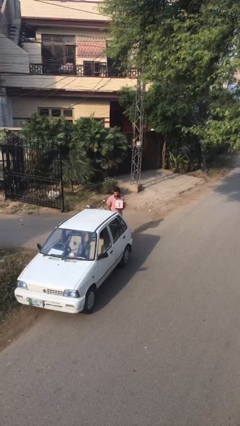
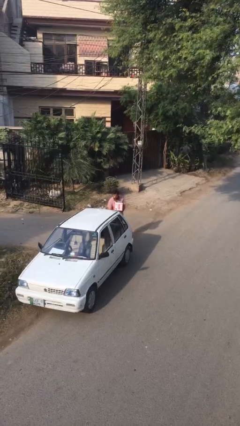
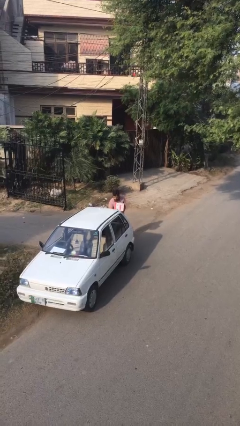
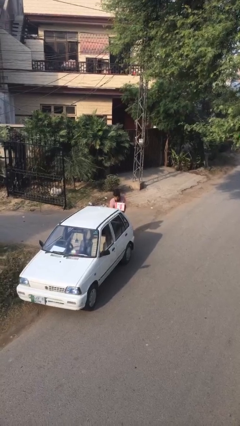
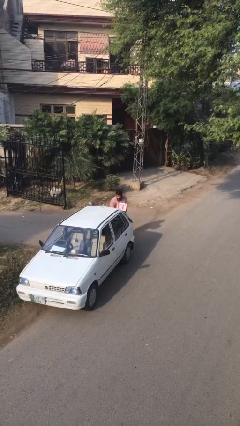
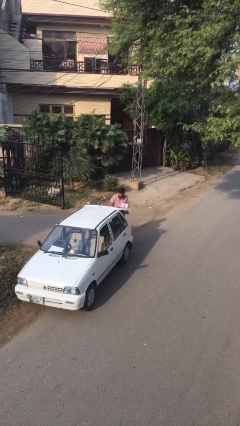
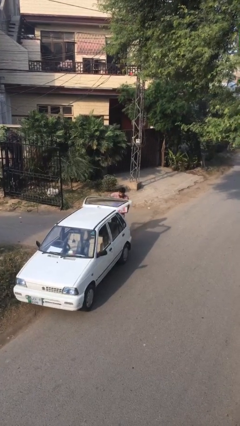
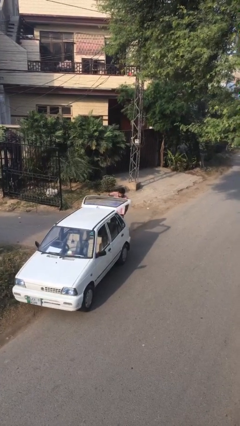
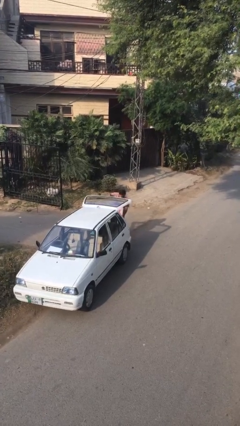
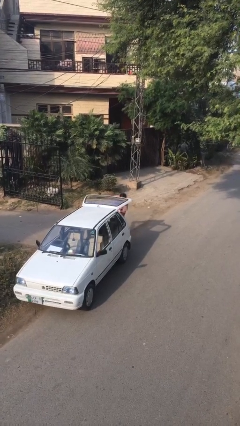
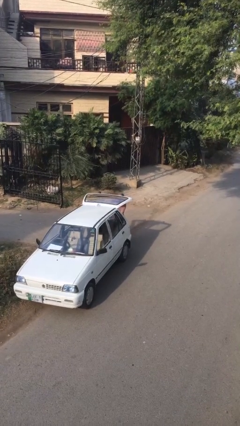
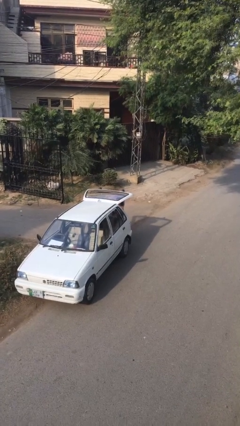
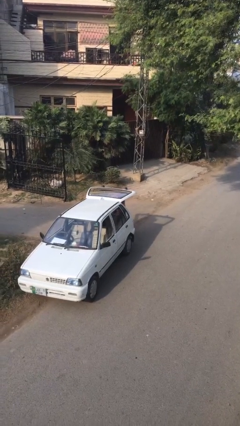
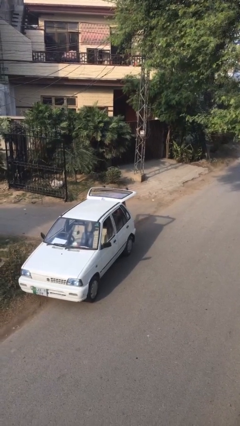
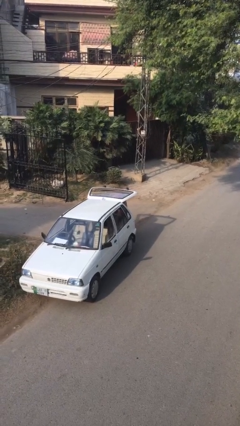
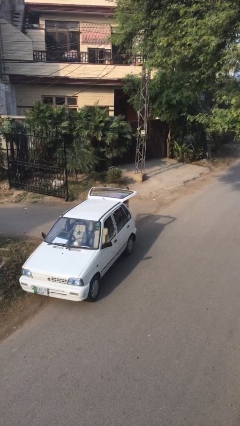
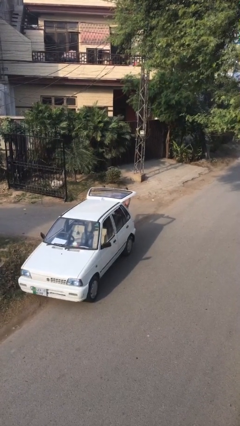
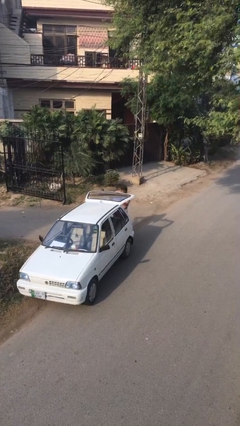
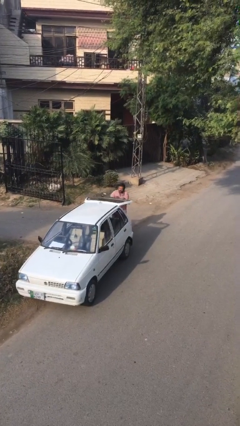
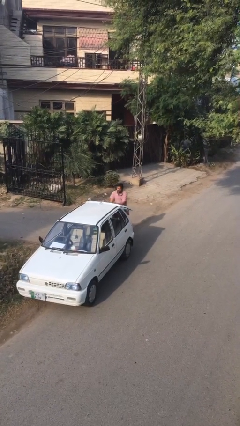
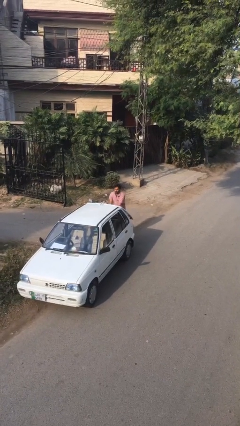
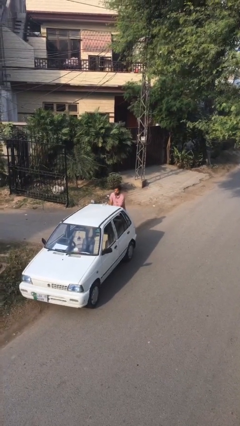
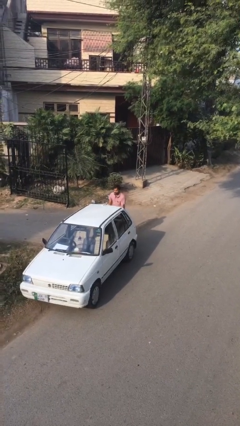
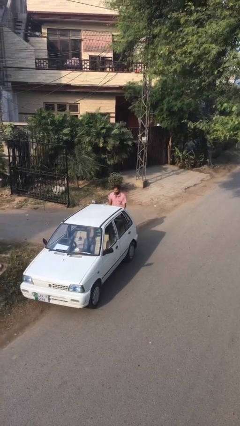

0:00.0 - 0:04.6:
person loads car

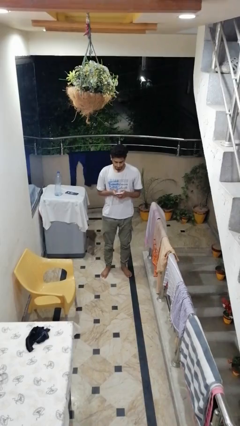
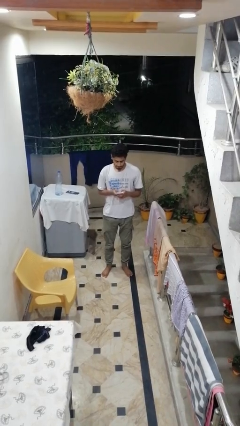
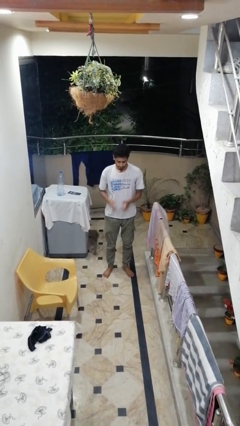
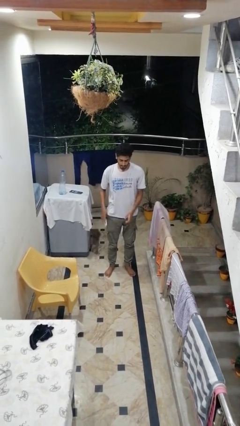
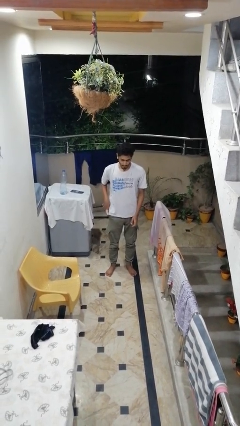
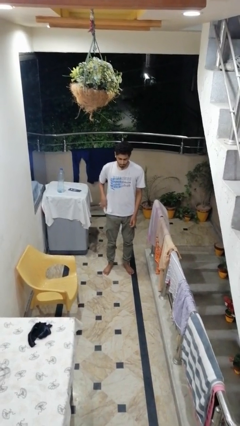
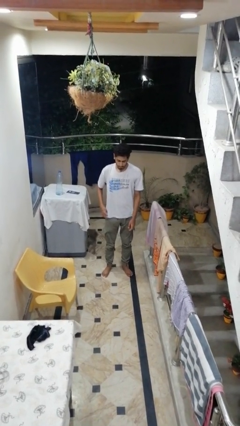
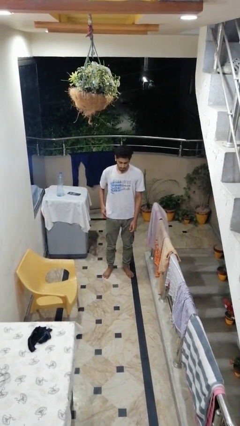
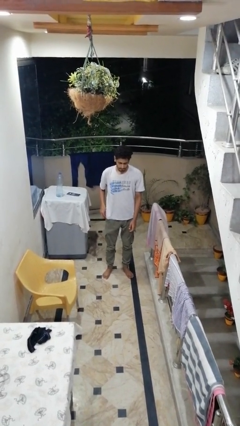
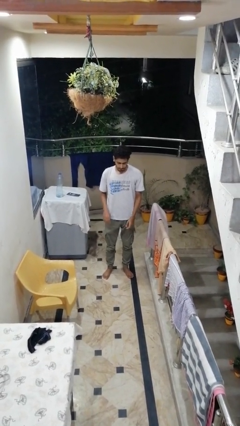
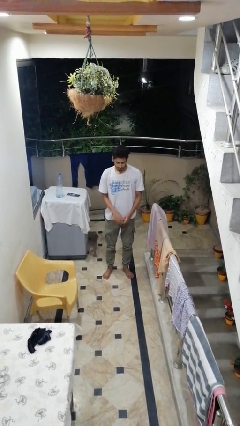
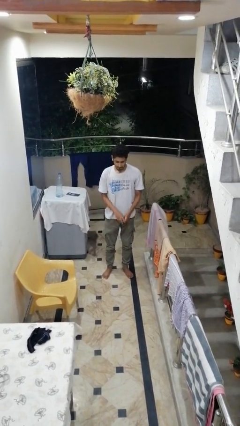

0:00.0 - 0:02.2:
person puts phone into pocket

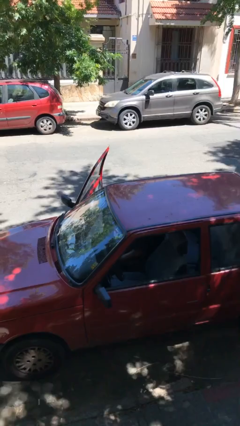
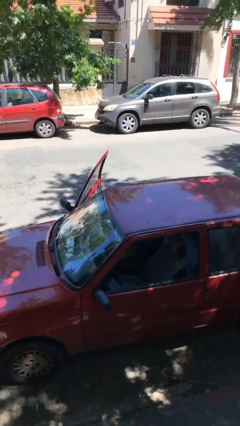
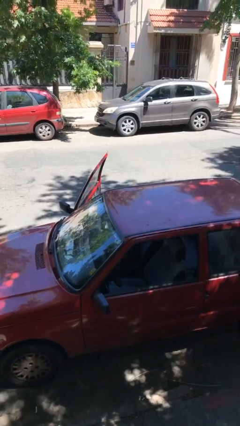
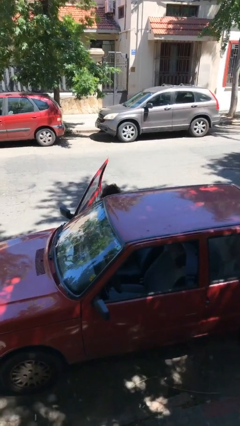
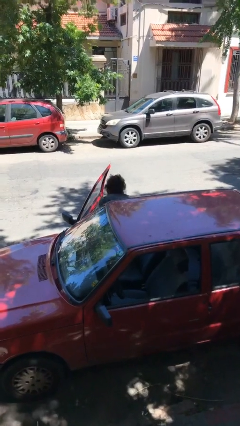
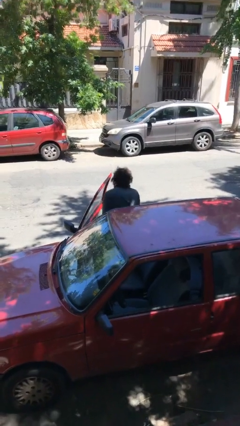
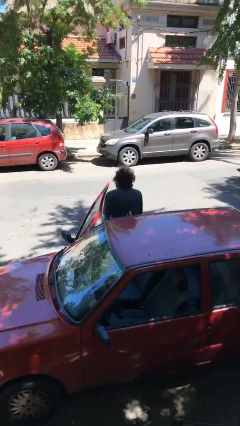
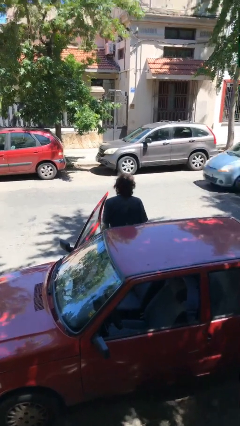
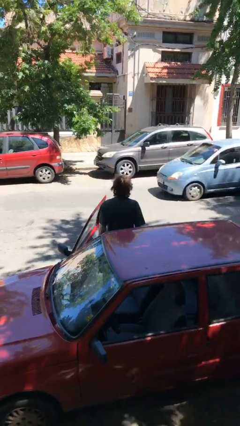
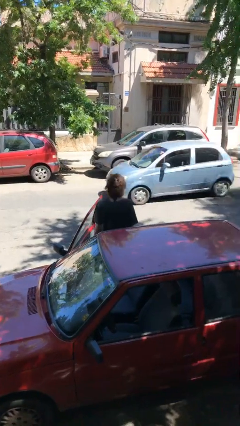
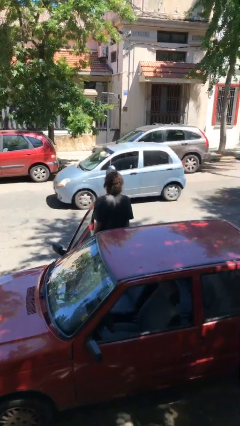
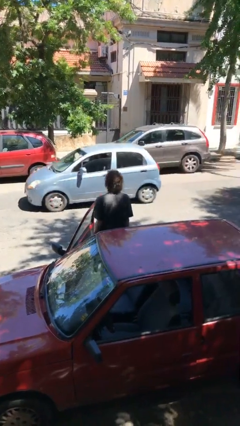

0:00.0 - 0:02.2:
person exits car

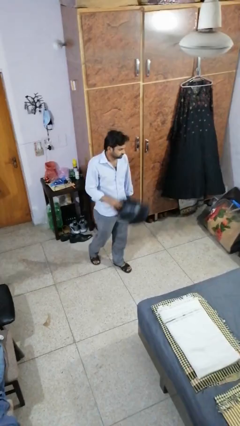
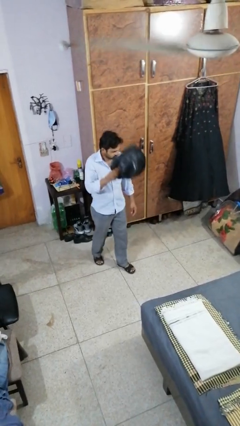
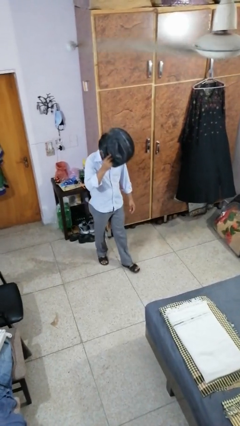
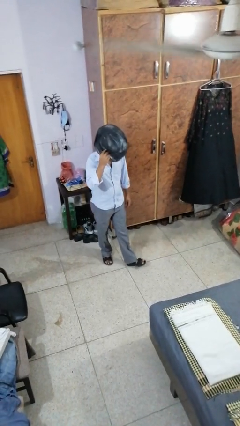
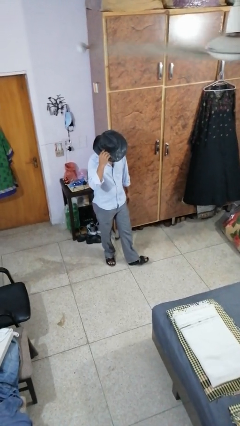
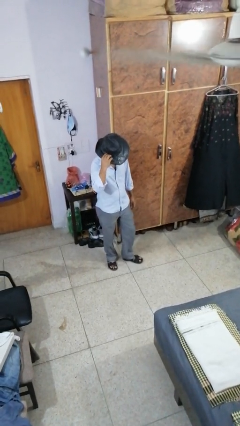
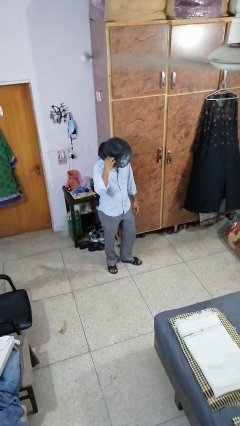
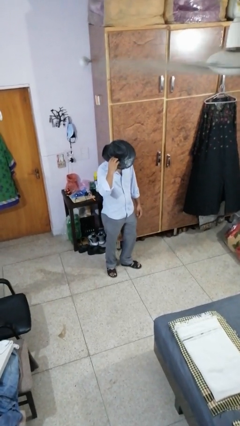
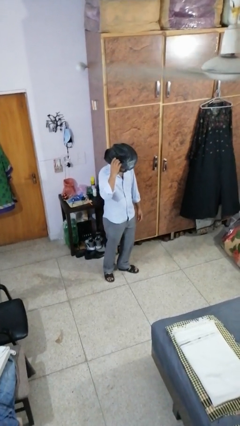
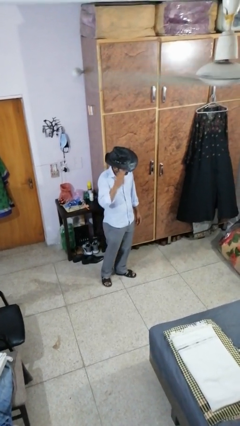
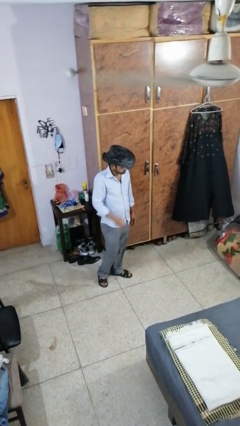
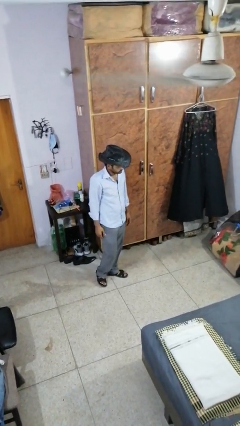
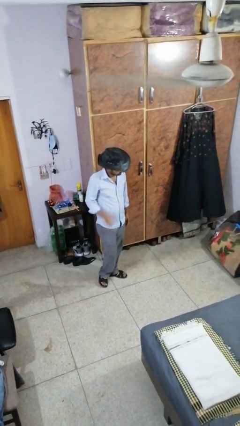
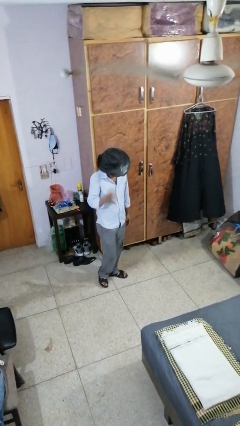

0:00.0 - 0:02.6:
person puts on hat

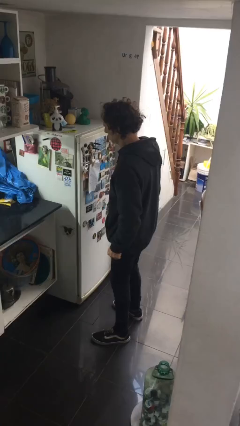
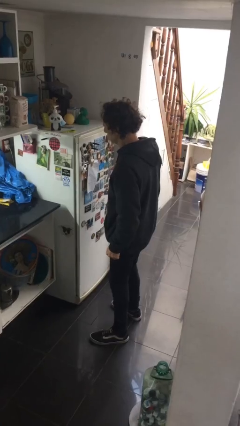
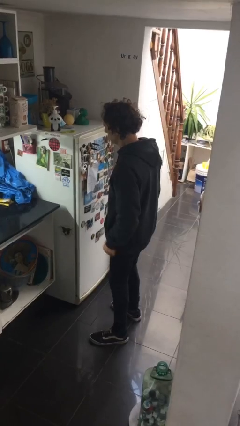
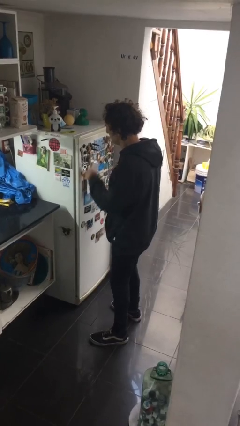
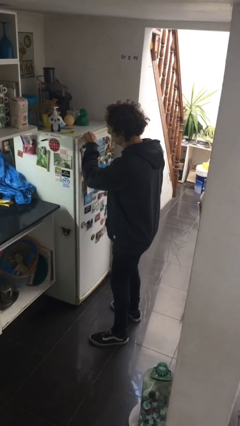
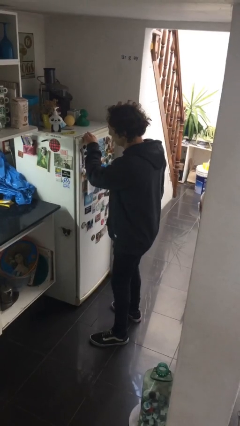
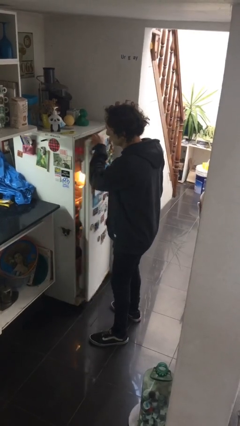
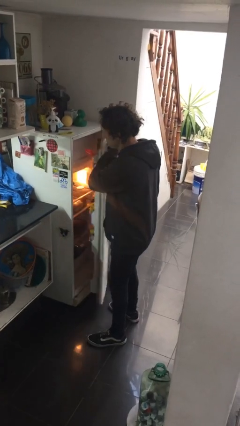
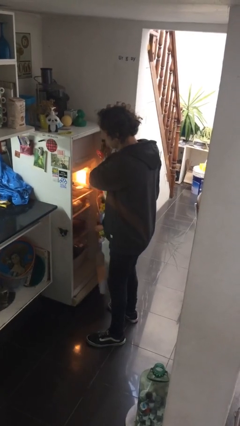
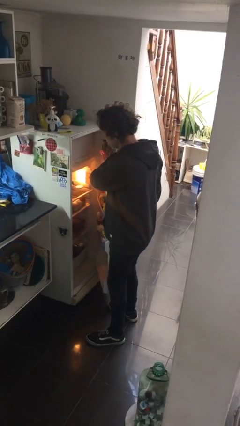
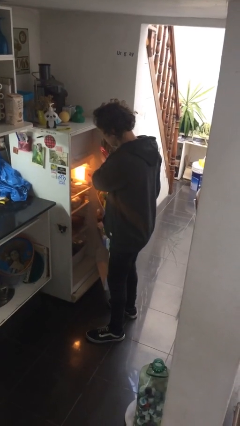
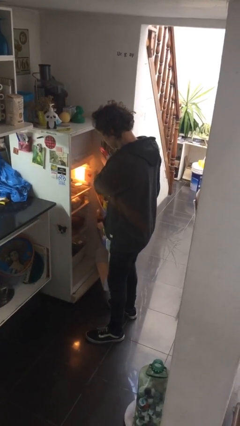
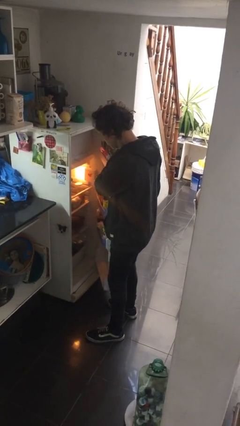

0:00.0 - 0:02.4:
person opens refrigerator

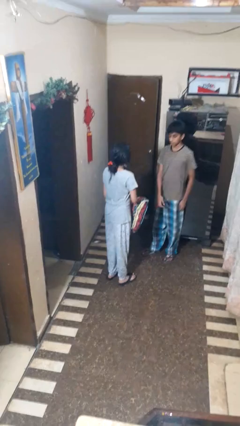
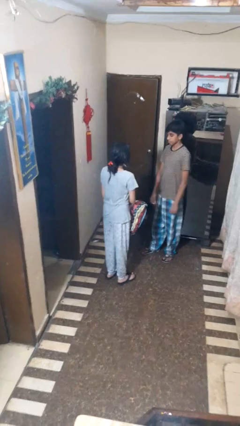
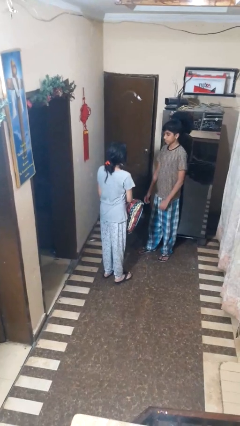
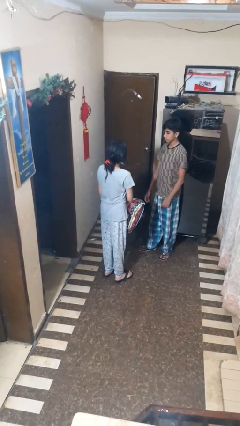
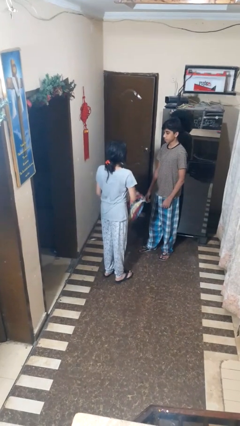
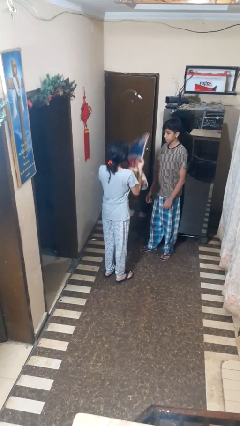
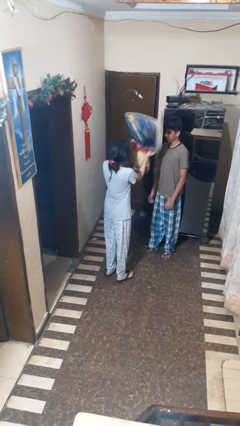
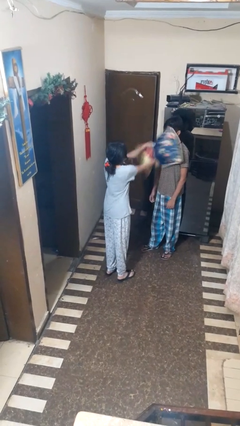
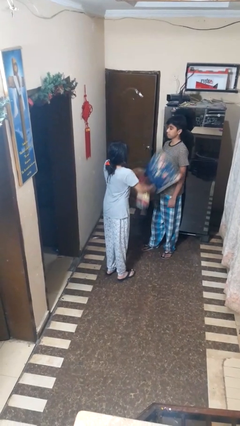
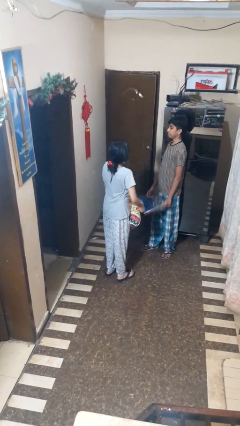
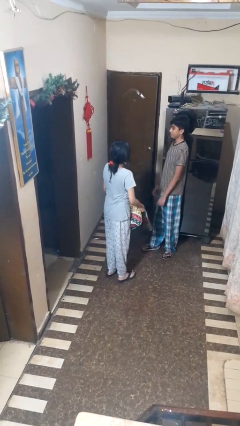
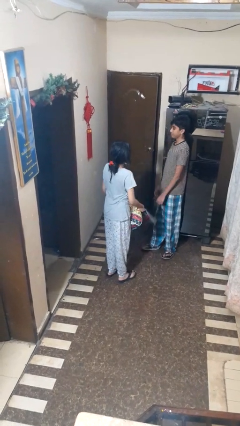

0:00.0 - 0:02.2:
person hits person with pillow

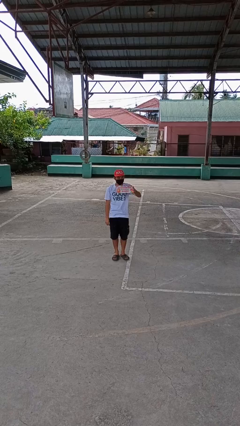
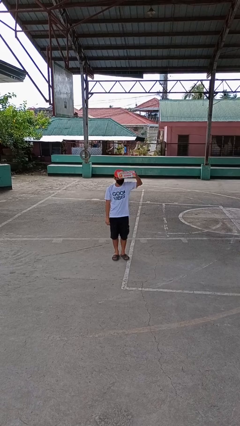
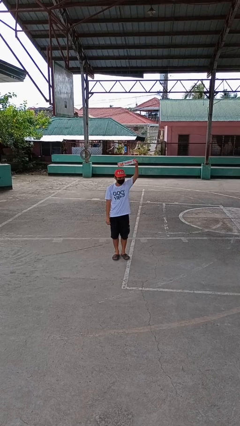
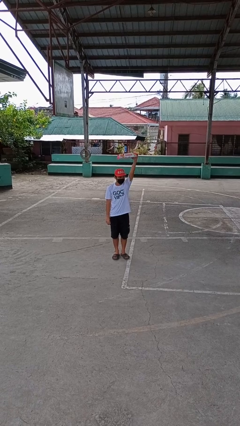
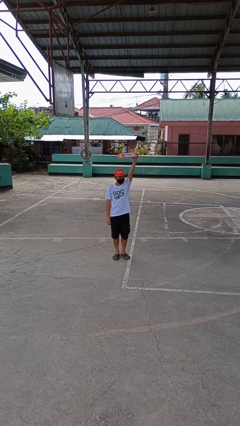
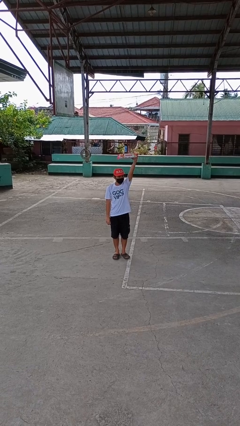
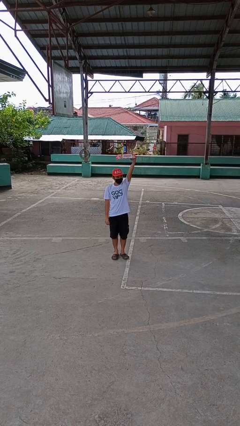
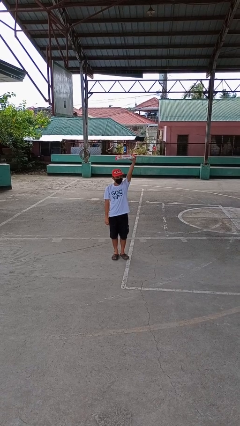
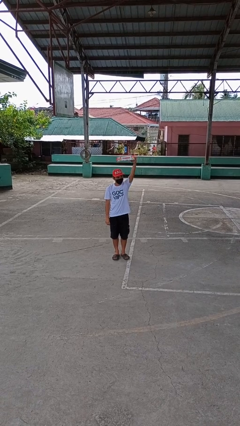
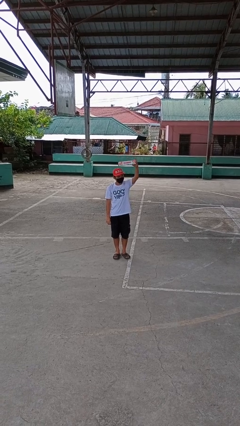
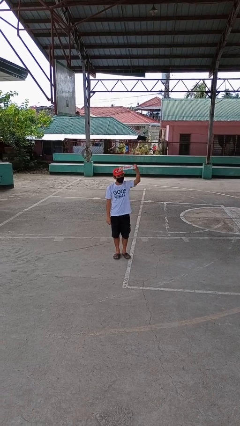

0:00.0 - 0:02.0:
person holds object above head
